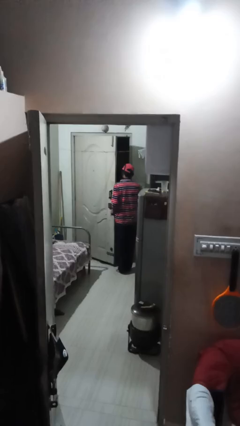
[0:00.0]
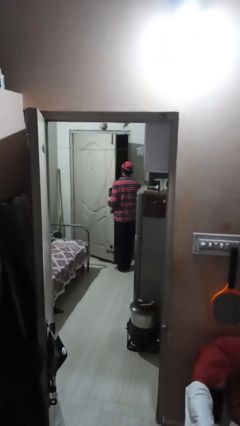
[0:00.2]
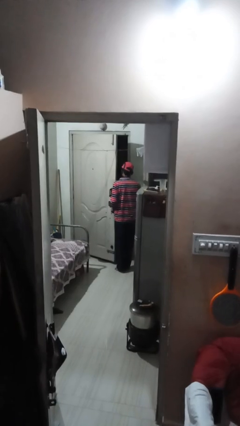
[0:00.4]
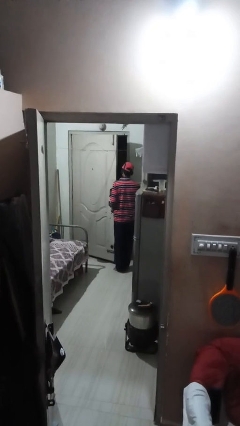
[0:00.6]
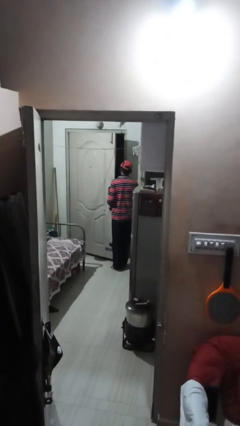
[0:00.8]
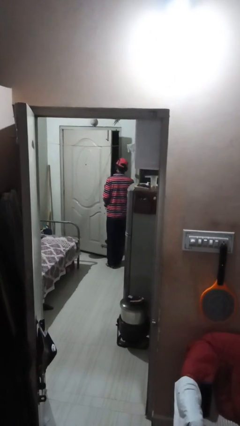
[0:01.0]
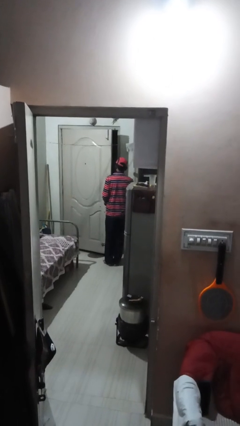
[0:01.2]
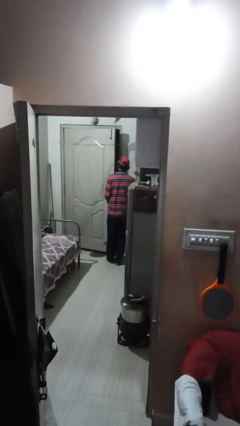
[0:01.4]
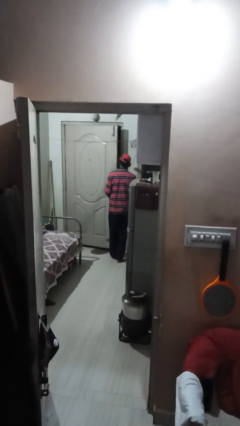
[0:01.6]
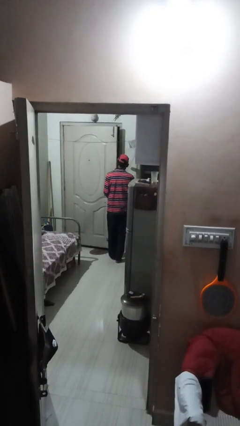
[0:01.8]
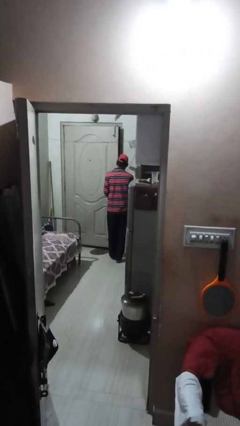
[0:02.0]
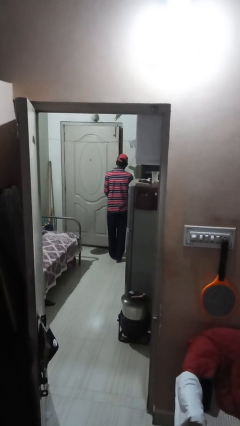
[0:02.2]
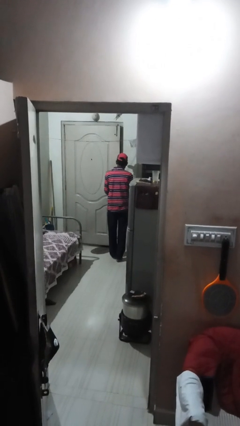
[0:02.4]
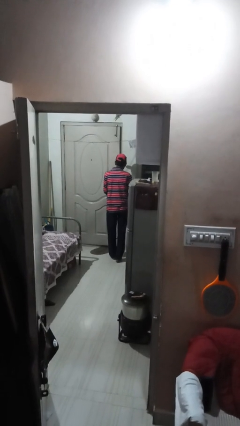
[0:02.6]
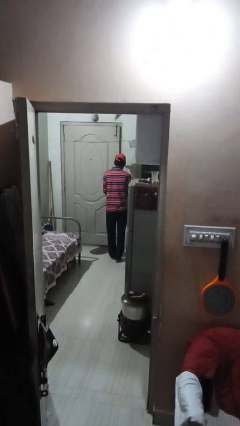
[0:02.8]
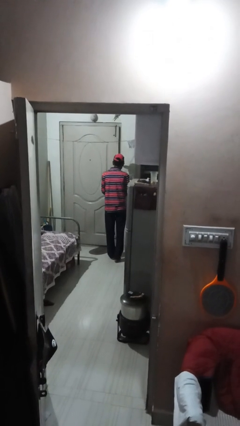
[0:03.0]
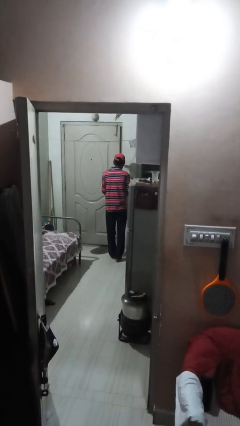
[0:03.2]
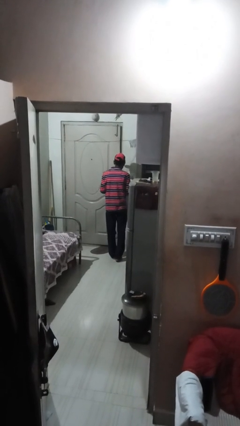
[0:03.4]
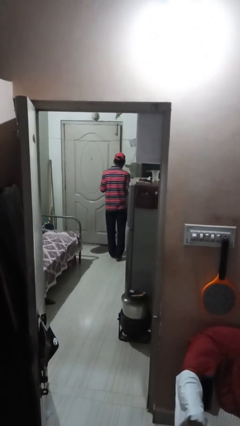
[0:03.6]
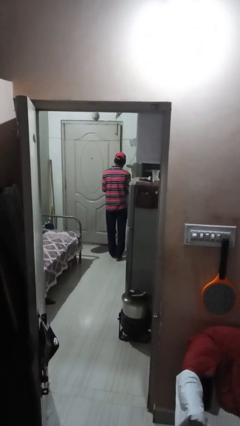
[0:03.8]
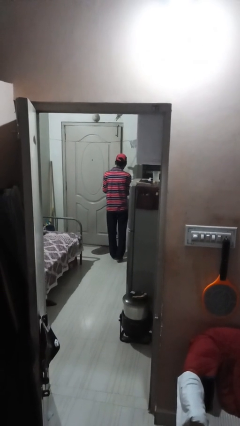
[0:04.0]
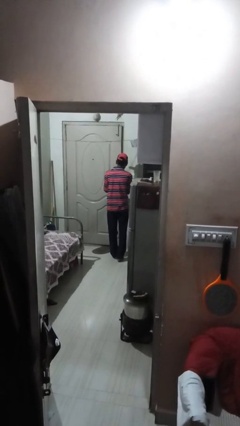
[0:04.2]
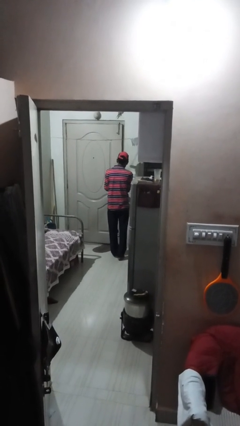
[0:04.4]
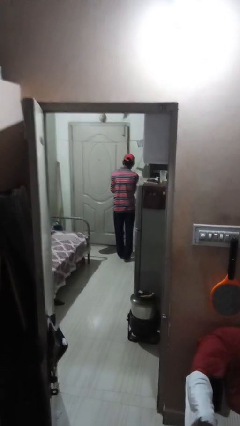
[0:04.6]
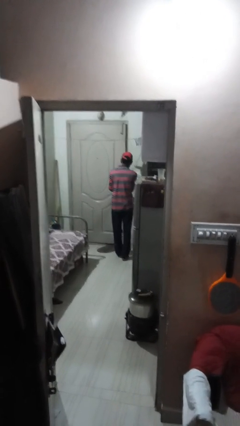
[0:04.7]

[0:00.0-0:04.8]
person closes facility door

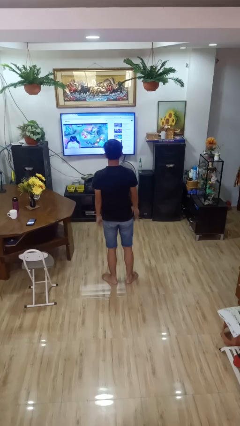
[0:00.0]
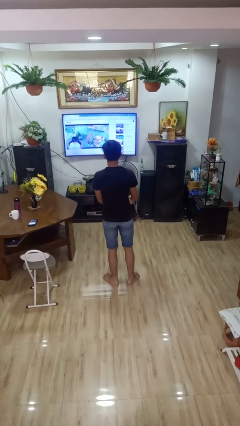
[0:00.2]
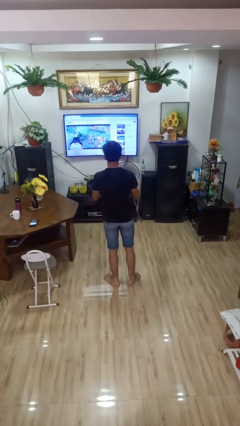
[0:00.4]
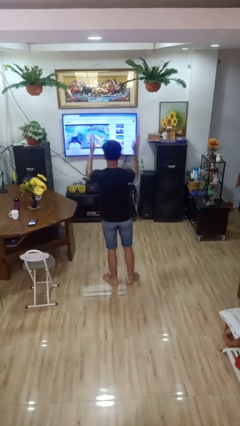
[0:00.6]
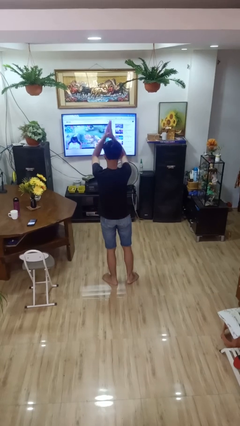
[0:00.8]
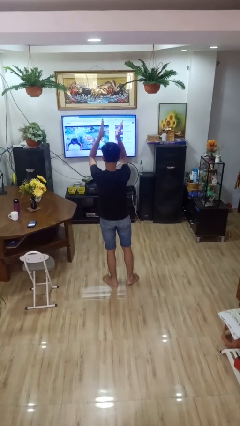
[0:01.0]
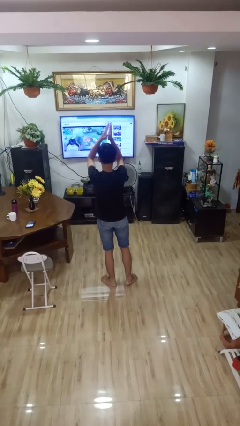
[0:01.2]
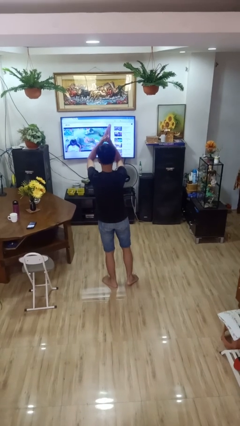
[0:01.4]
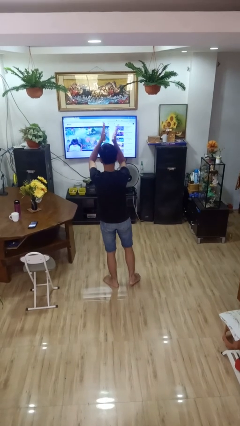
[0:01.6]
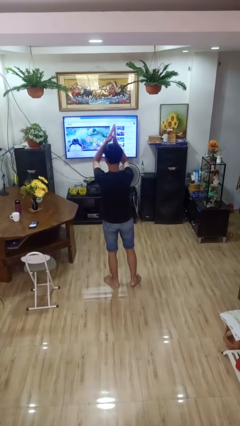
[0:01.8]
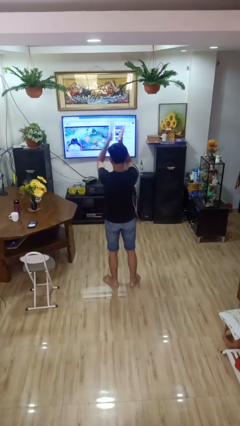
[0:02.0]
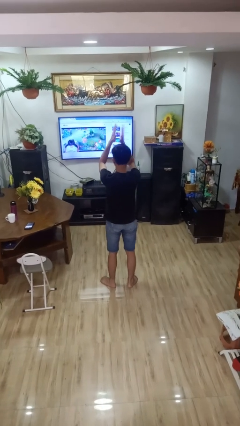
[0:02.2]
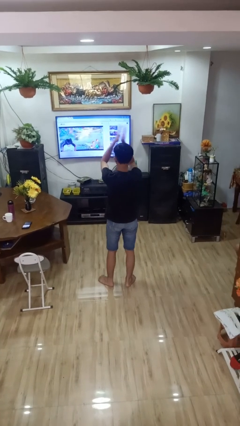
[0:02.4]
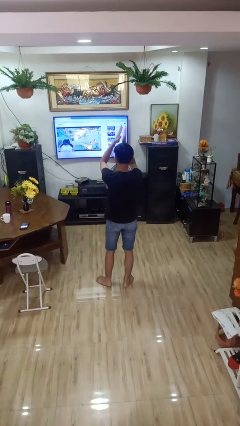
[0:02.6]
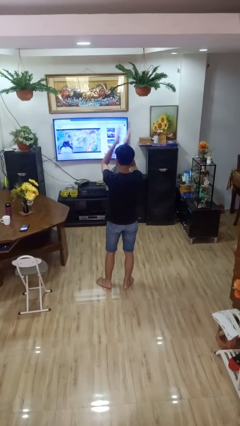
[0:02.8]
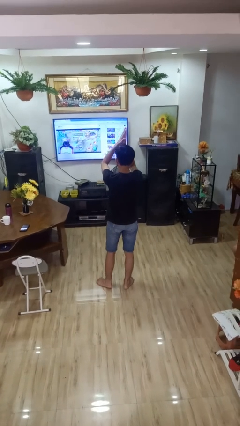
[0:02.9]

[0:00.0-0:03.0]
person claps hands

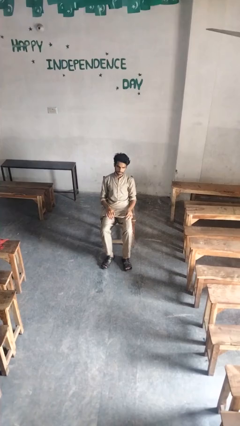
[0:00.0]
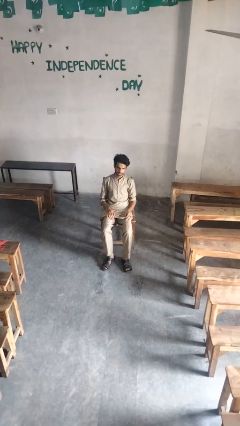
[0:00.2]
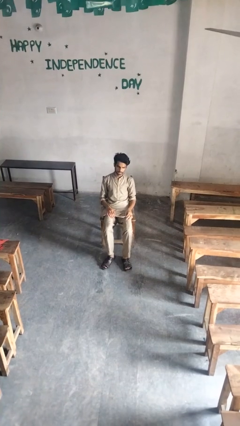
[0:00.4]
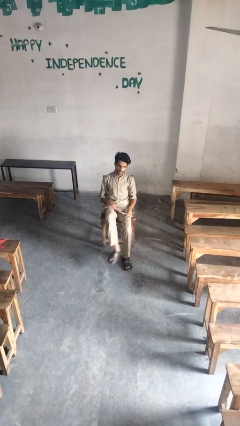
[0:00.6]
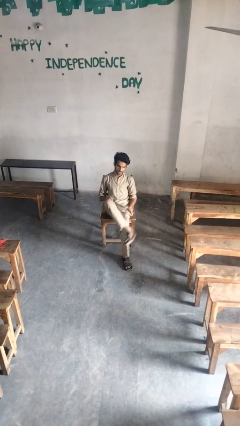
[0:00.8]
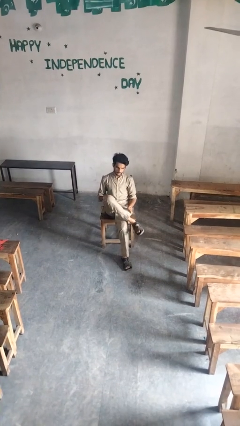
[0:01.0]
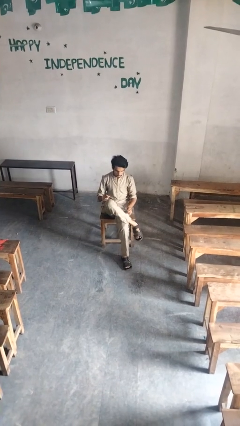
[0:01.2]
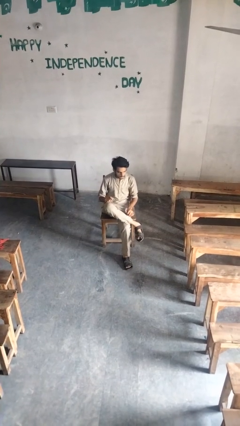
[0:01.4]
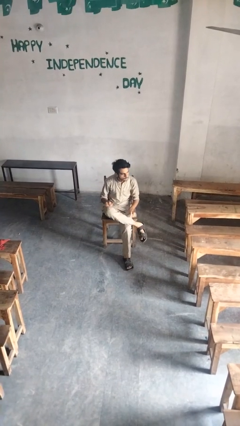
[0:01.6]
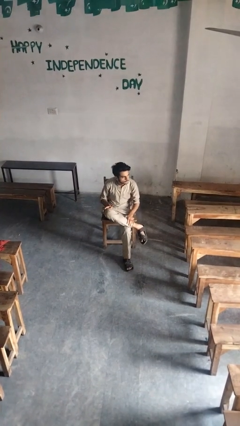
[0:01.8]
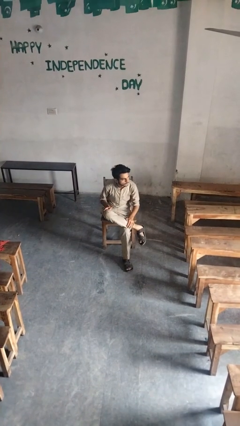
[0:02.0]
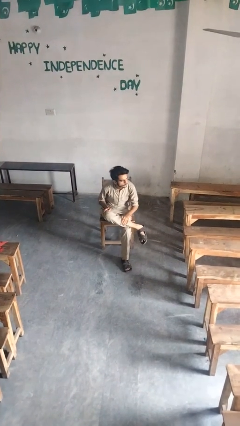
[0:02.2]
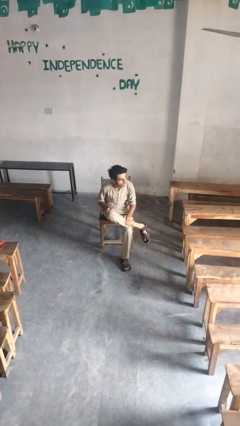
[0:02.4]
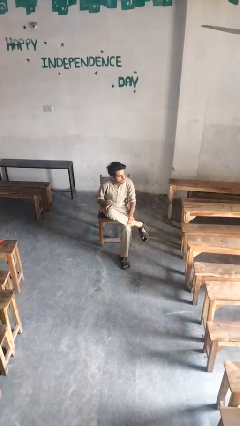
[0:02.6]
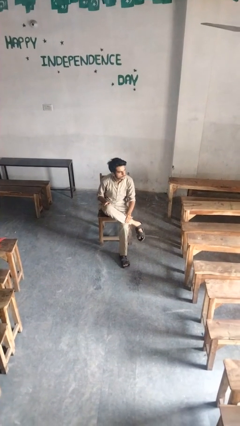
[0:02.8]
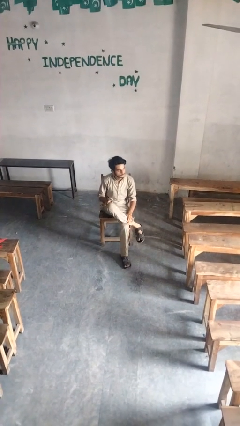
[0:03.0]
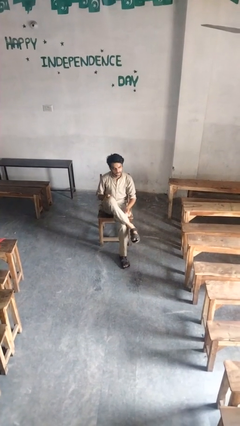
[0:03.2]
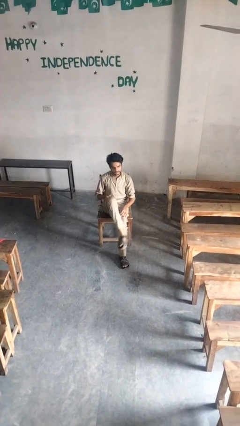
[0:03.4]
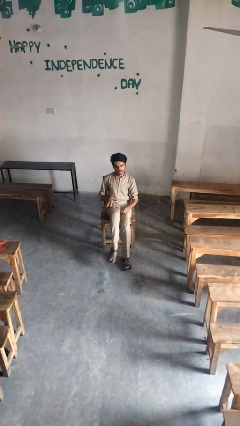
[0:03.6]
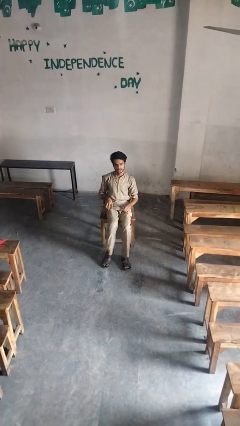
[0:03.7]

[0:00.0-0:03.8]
person crosses legs

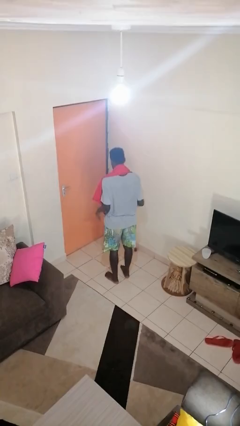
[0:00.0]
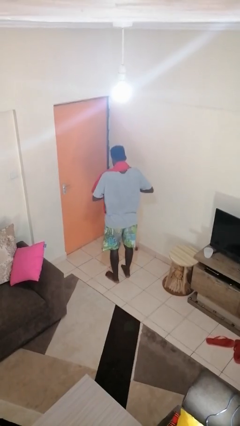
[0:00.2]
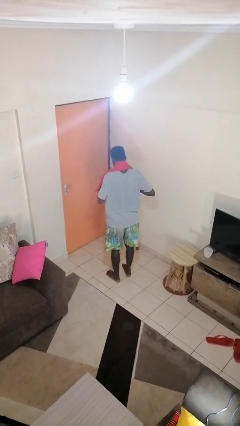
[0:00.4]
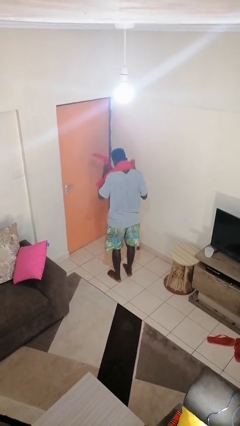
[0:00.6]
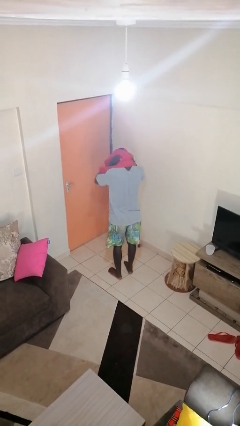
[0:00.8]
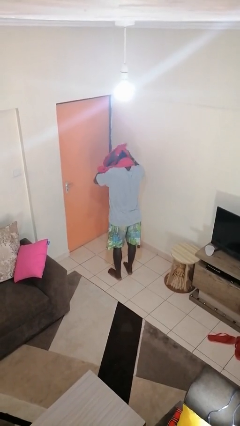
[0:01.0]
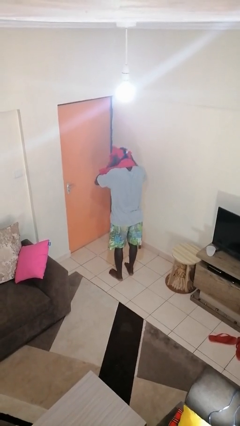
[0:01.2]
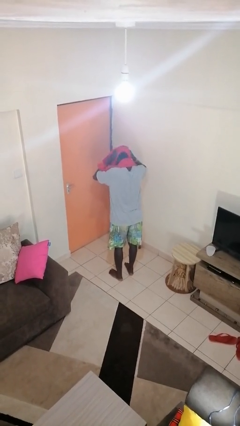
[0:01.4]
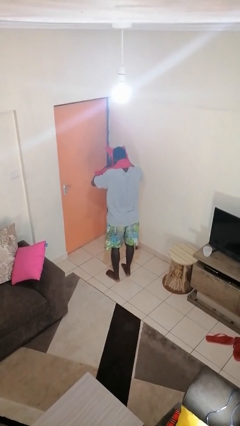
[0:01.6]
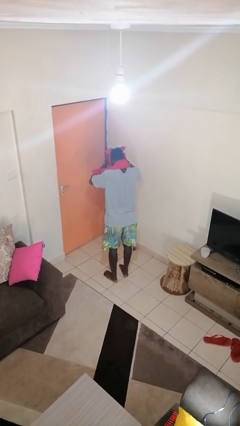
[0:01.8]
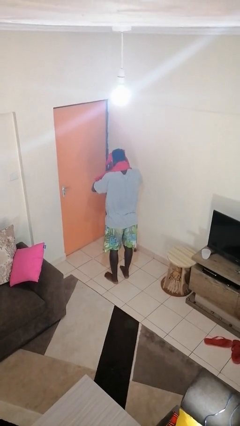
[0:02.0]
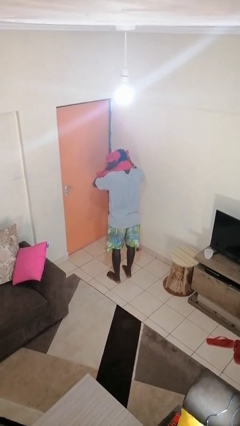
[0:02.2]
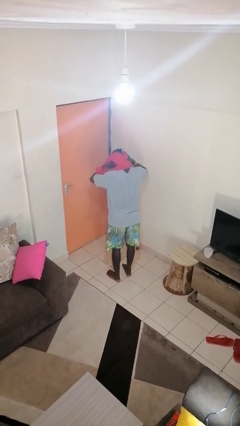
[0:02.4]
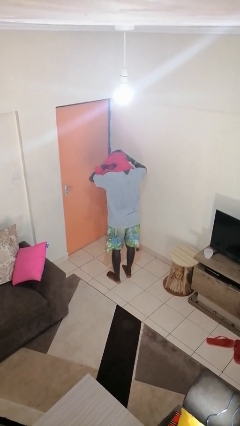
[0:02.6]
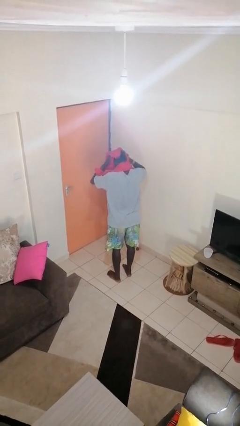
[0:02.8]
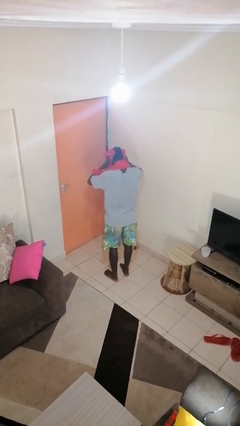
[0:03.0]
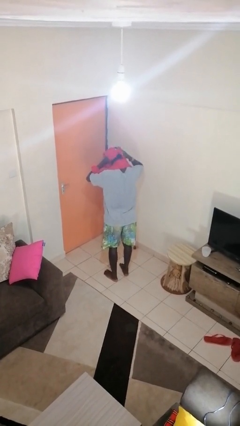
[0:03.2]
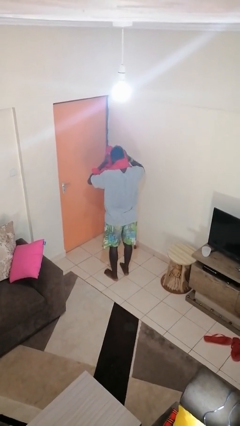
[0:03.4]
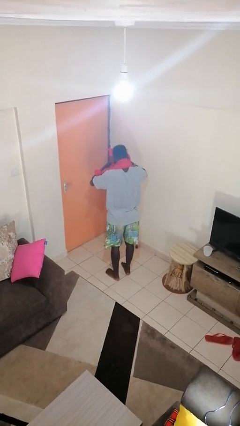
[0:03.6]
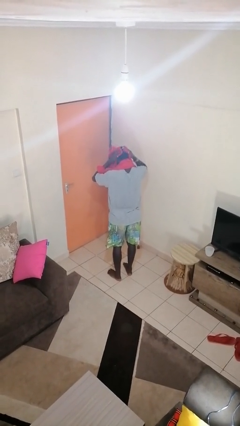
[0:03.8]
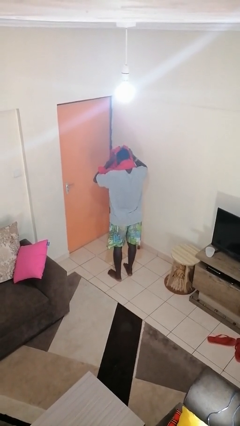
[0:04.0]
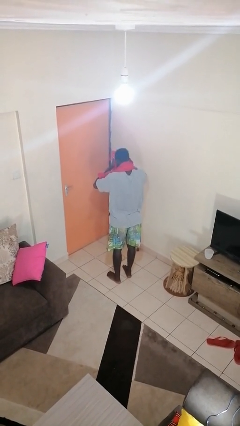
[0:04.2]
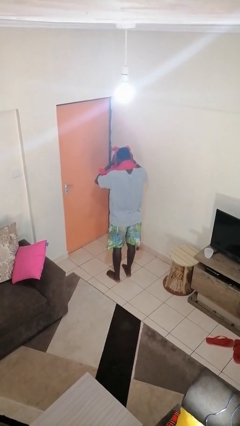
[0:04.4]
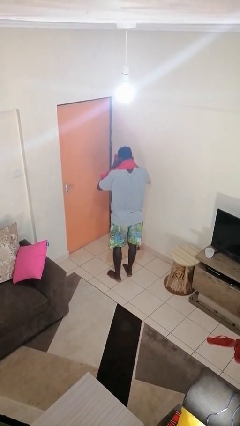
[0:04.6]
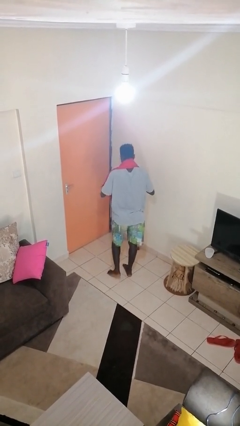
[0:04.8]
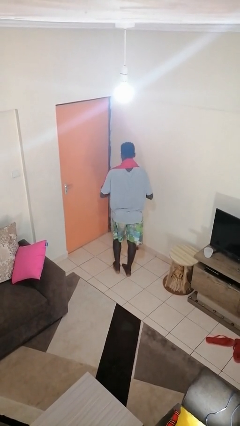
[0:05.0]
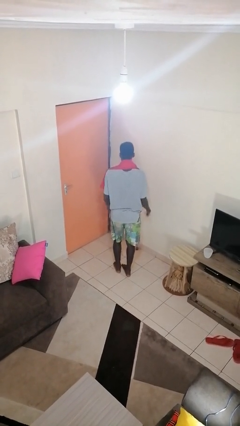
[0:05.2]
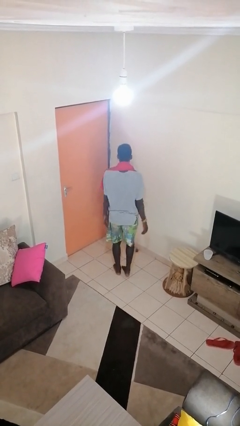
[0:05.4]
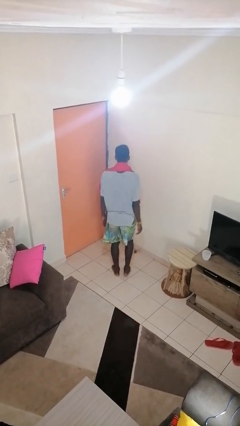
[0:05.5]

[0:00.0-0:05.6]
person dries hair with towel

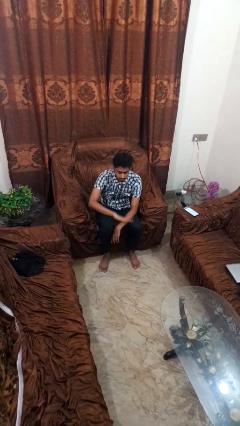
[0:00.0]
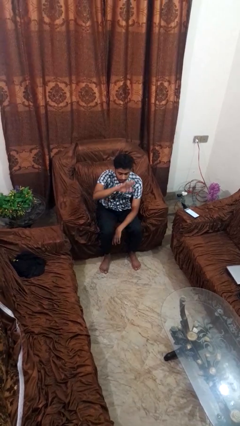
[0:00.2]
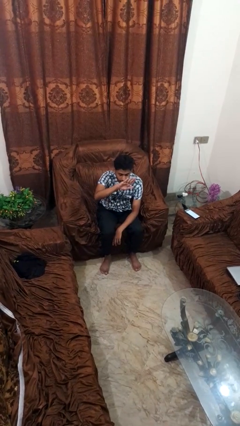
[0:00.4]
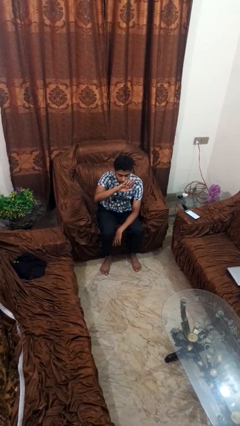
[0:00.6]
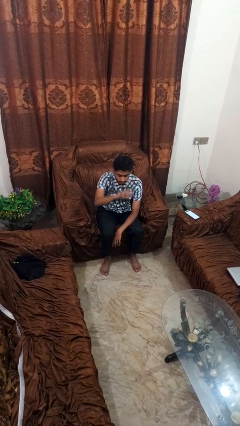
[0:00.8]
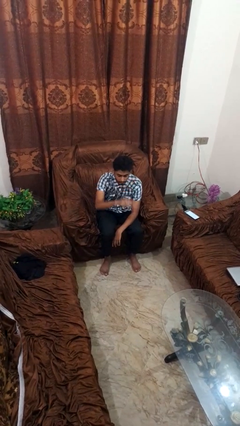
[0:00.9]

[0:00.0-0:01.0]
person gestures swipe up
